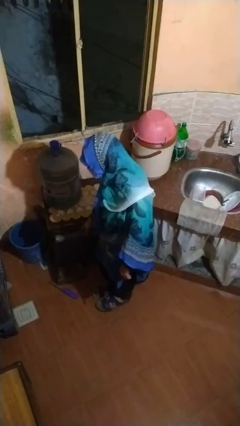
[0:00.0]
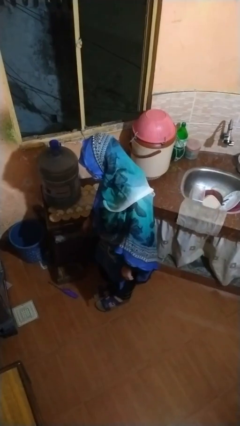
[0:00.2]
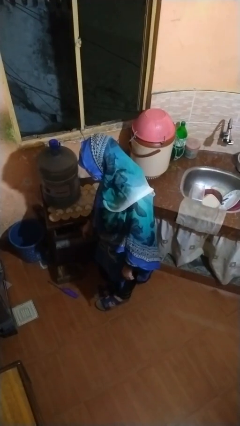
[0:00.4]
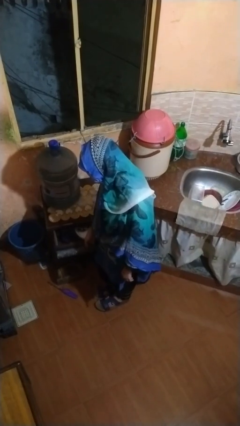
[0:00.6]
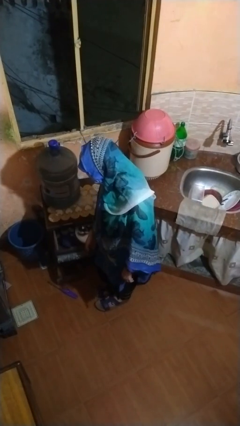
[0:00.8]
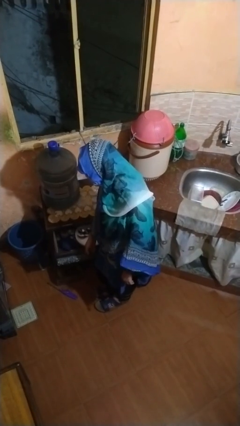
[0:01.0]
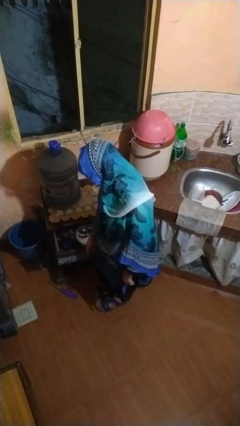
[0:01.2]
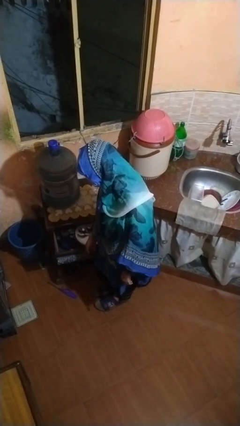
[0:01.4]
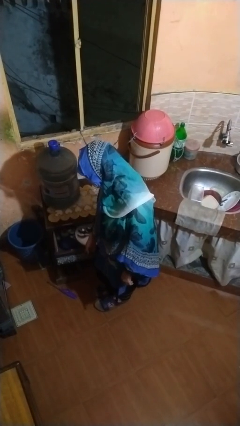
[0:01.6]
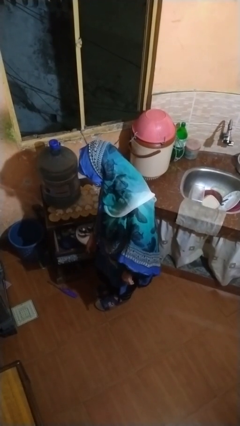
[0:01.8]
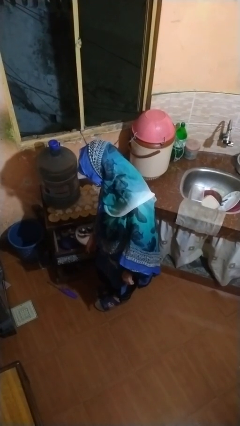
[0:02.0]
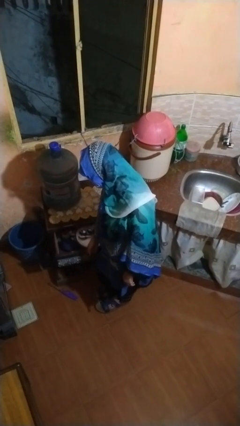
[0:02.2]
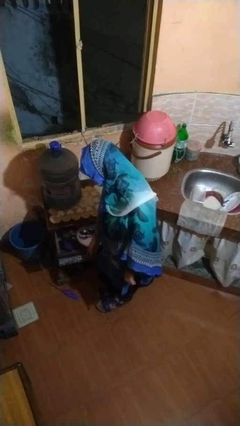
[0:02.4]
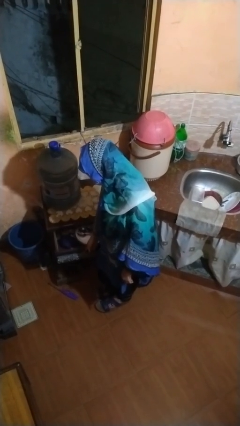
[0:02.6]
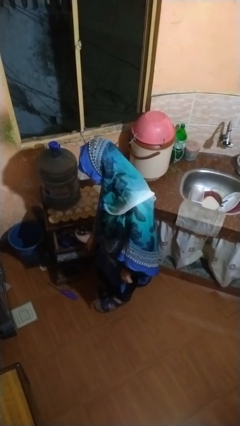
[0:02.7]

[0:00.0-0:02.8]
person opens kitchen drawer

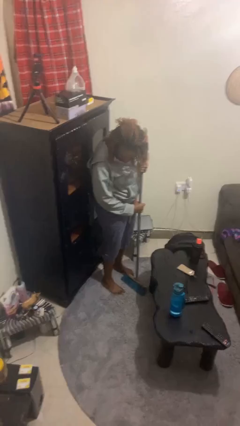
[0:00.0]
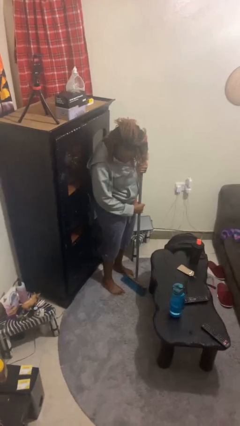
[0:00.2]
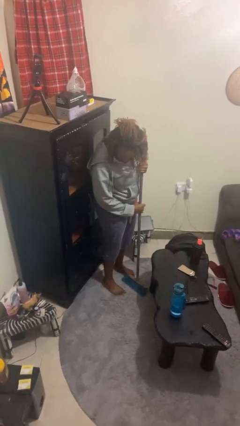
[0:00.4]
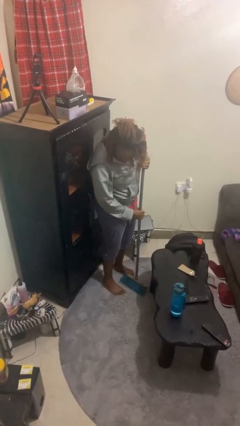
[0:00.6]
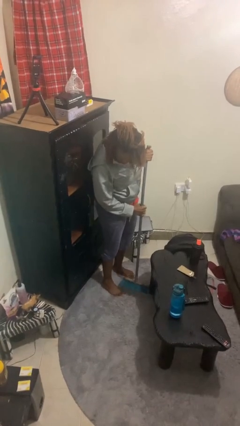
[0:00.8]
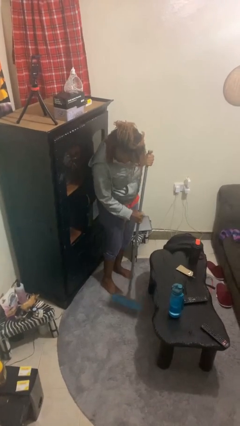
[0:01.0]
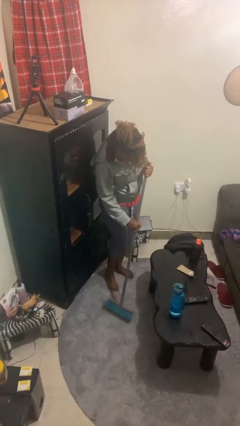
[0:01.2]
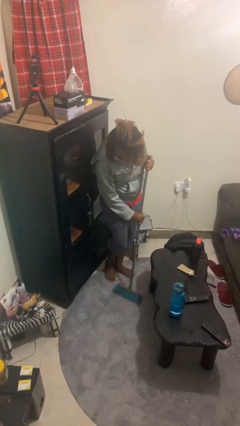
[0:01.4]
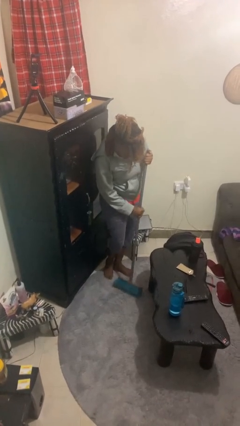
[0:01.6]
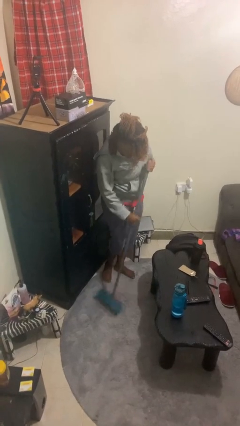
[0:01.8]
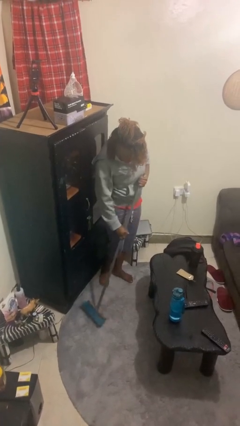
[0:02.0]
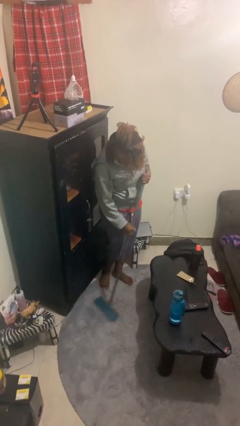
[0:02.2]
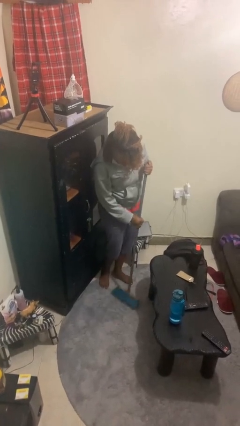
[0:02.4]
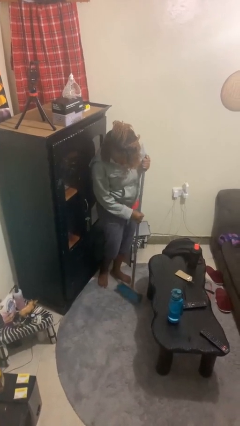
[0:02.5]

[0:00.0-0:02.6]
person sweeps floor

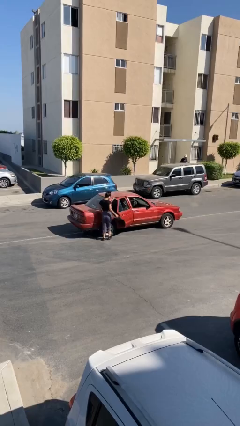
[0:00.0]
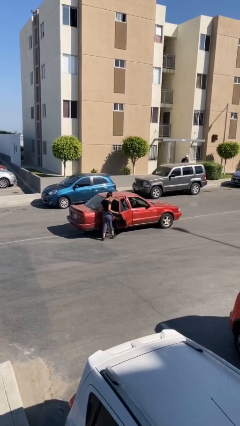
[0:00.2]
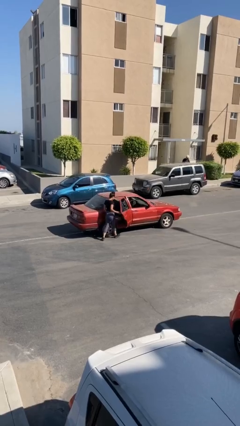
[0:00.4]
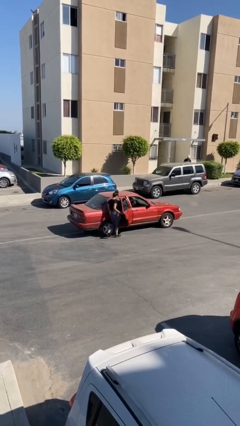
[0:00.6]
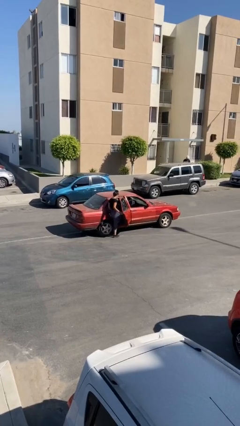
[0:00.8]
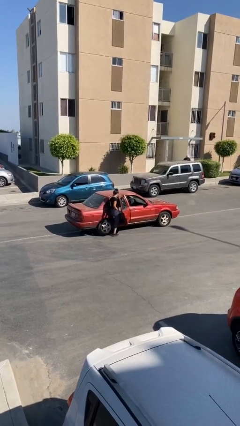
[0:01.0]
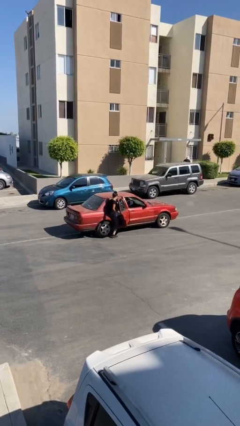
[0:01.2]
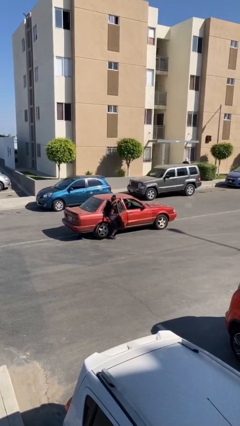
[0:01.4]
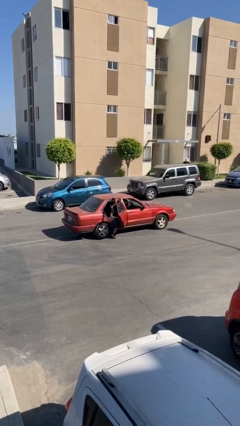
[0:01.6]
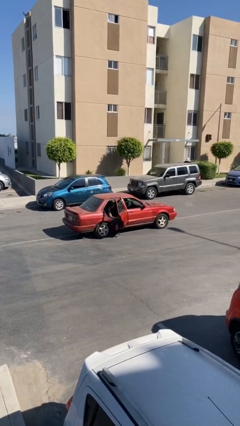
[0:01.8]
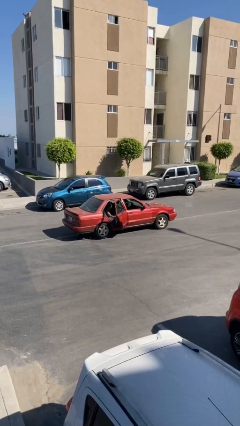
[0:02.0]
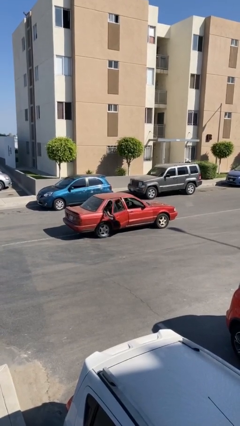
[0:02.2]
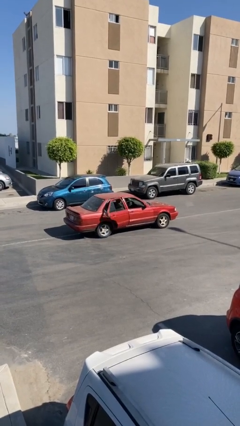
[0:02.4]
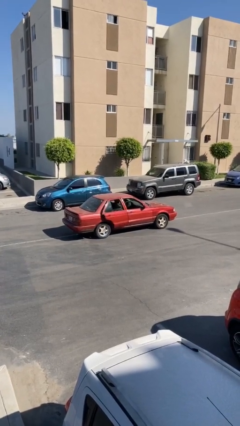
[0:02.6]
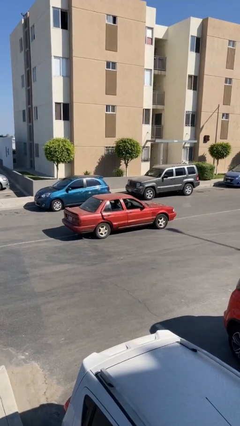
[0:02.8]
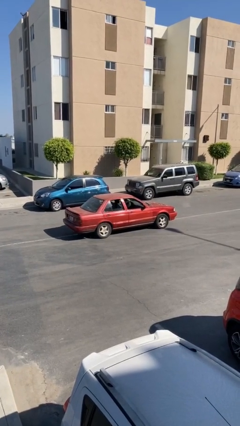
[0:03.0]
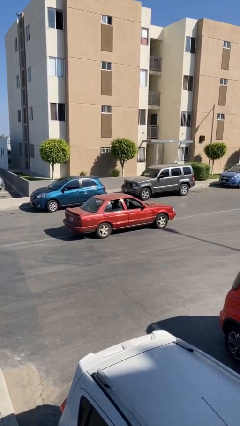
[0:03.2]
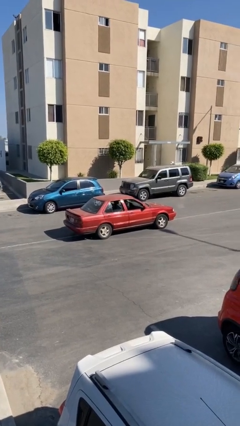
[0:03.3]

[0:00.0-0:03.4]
car picks up person

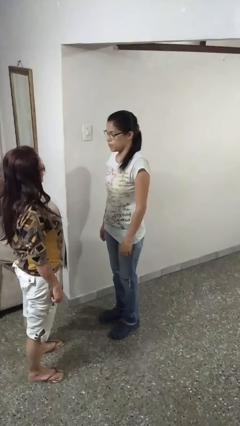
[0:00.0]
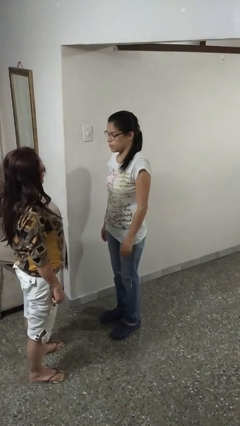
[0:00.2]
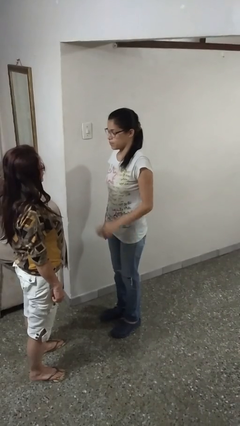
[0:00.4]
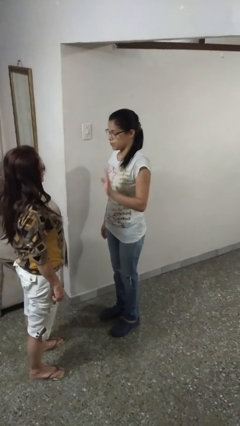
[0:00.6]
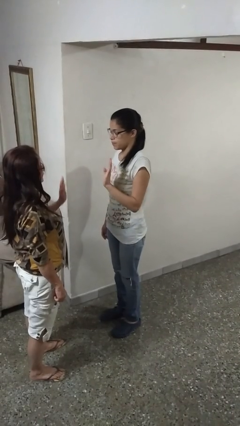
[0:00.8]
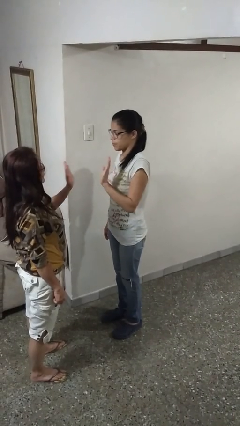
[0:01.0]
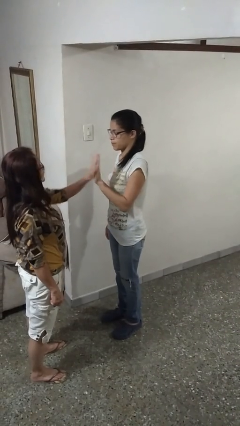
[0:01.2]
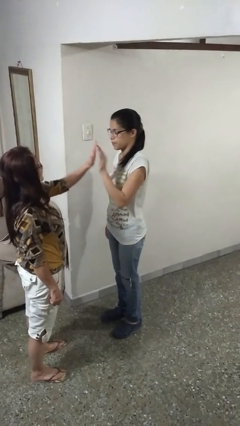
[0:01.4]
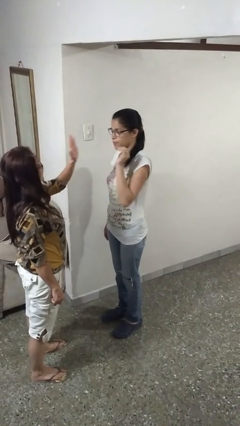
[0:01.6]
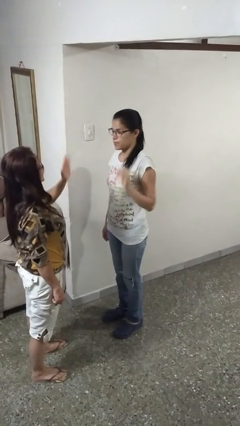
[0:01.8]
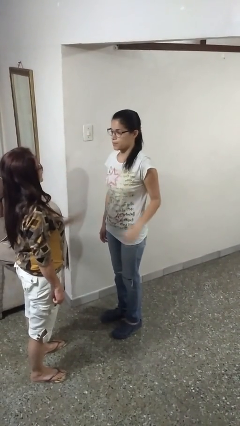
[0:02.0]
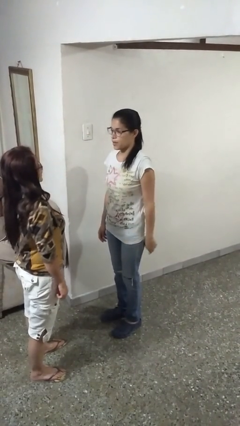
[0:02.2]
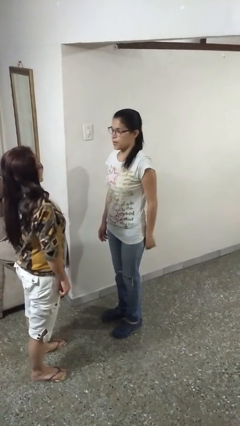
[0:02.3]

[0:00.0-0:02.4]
person highfives hand

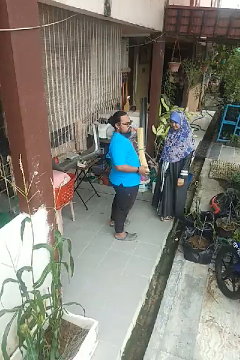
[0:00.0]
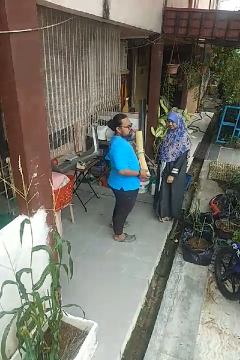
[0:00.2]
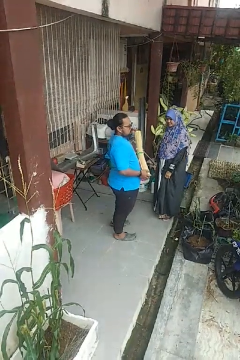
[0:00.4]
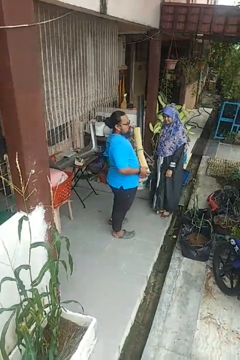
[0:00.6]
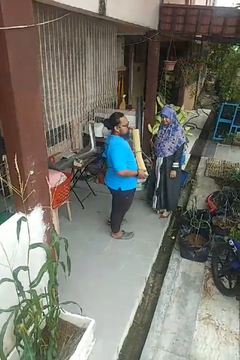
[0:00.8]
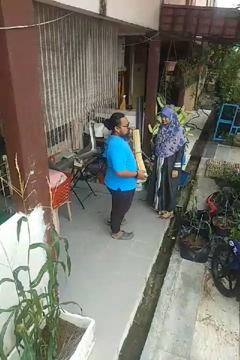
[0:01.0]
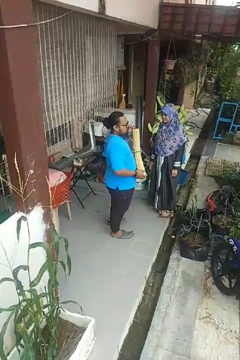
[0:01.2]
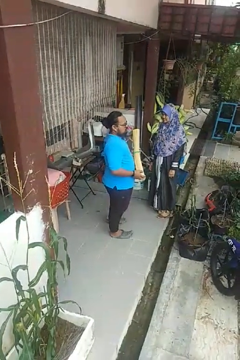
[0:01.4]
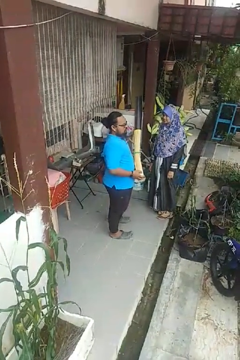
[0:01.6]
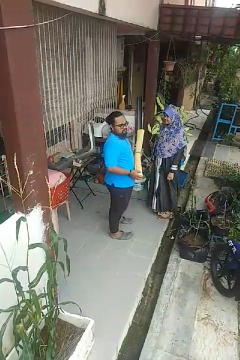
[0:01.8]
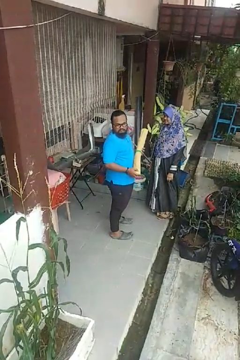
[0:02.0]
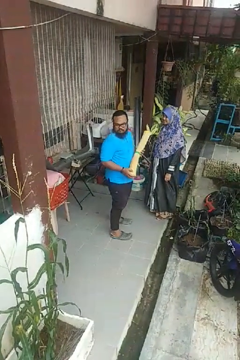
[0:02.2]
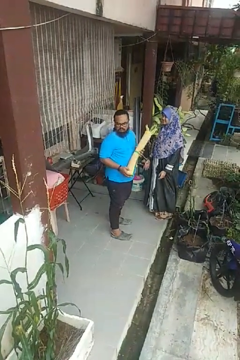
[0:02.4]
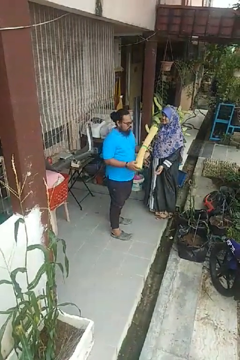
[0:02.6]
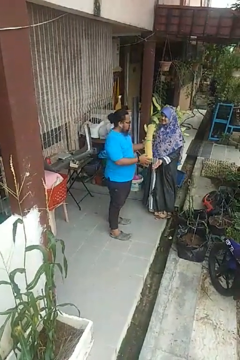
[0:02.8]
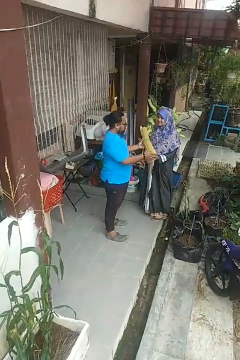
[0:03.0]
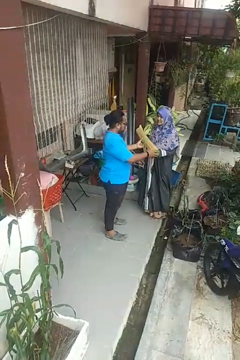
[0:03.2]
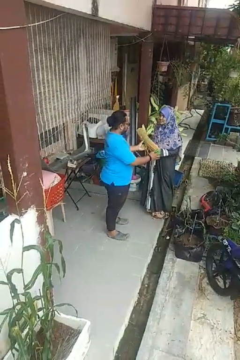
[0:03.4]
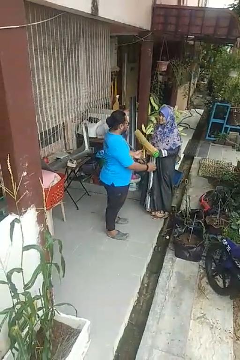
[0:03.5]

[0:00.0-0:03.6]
person transfers object to person

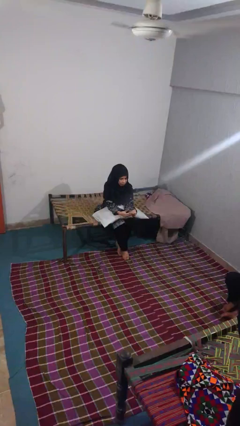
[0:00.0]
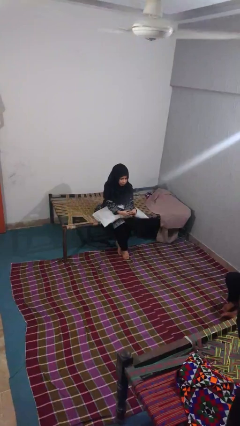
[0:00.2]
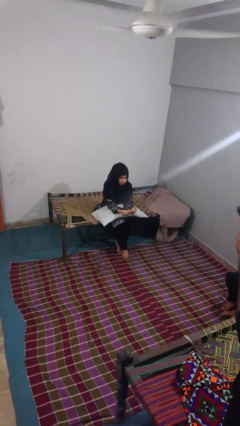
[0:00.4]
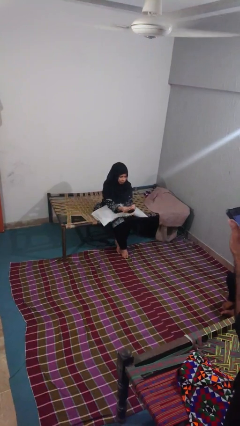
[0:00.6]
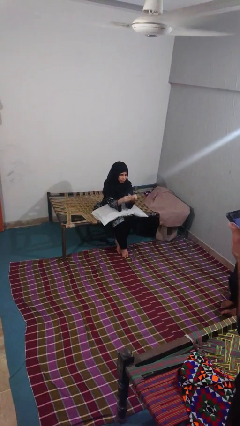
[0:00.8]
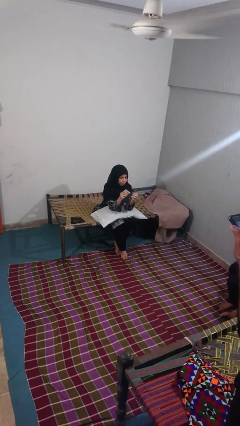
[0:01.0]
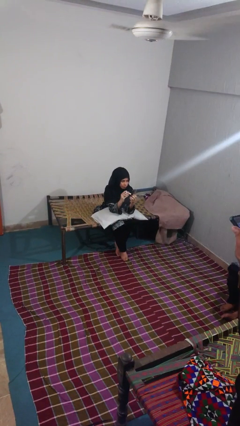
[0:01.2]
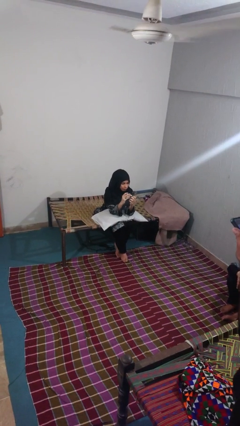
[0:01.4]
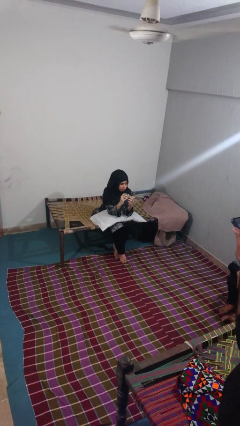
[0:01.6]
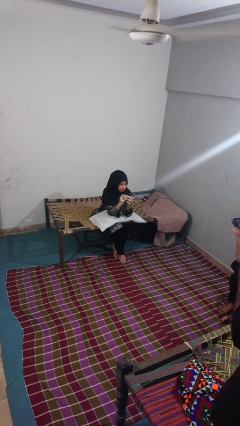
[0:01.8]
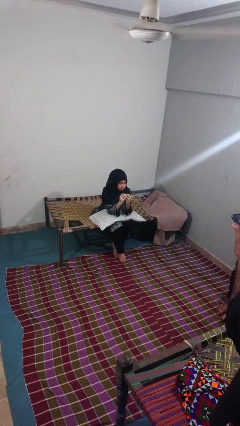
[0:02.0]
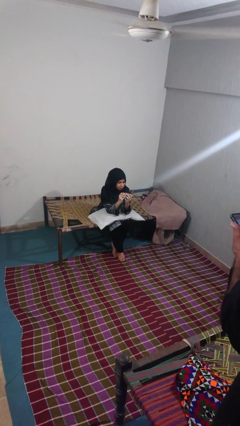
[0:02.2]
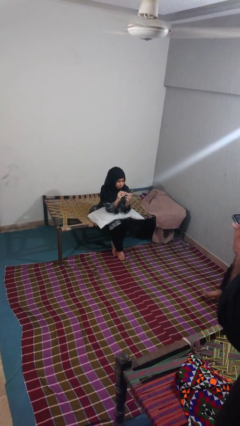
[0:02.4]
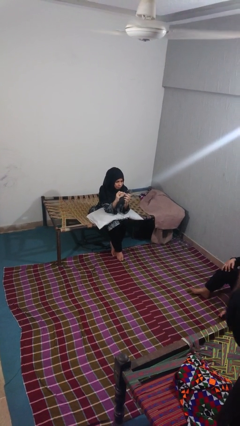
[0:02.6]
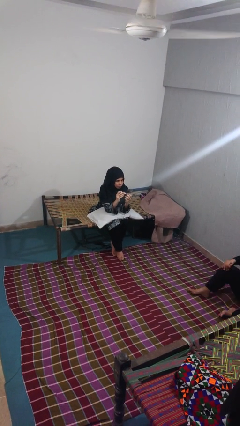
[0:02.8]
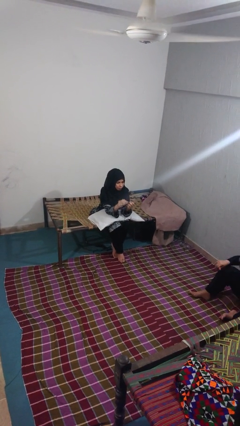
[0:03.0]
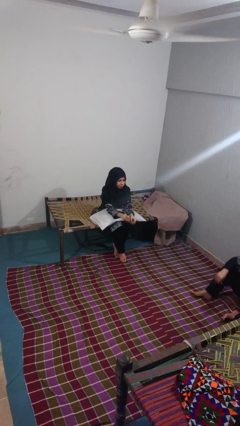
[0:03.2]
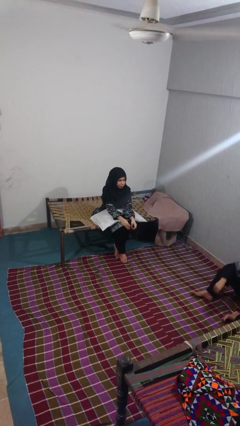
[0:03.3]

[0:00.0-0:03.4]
person clips fingernails
